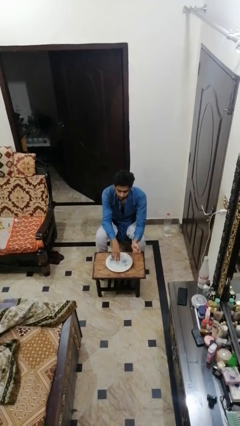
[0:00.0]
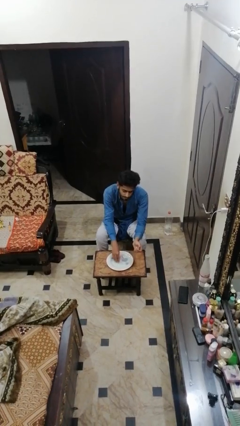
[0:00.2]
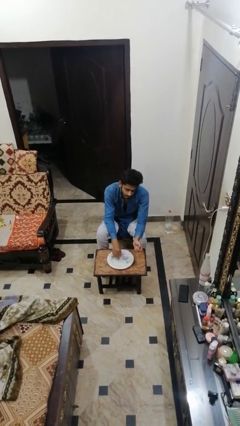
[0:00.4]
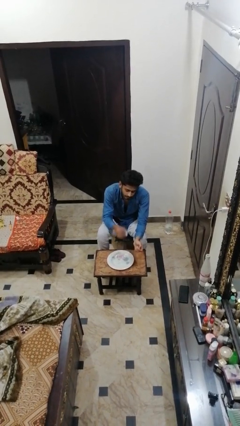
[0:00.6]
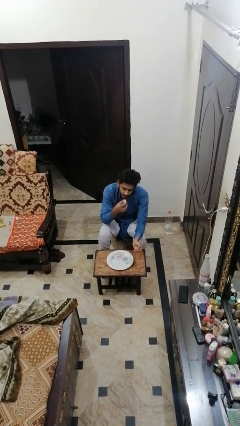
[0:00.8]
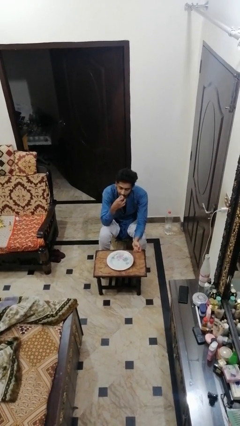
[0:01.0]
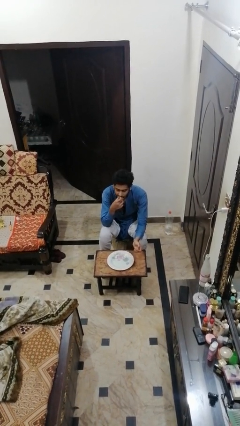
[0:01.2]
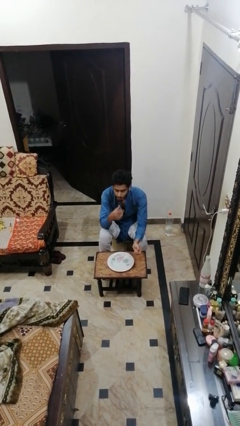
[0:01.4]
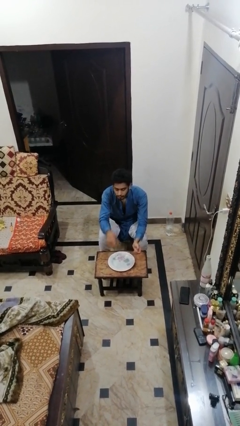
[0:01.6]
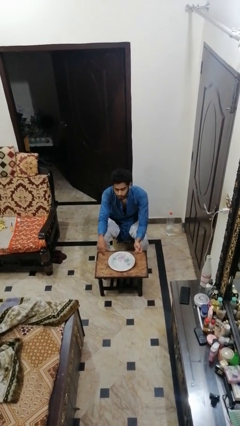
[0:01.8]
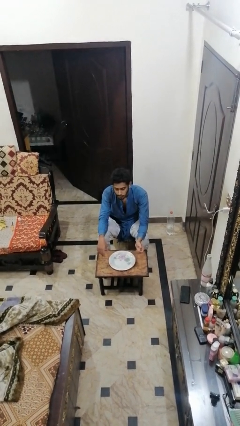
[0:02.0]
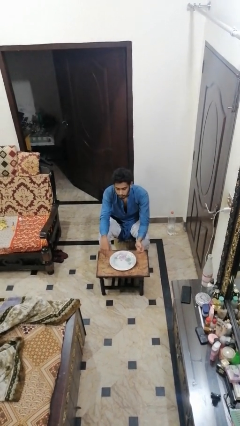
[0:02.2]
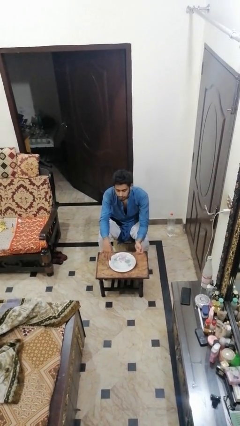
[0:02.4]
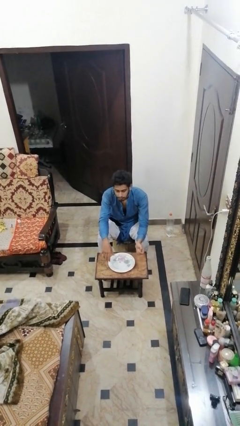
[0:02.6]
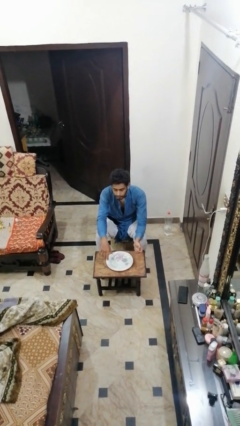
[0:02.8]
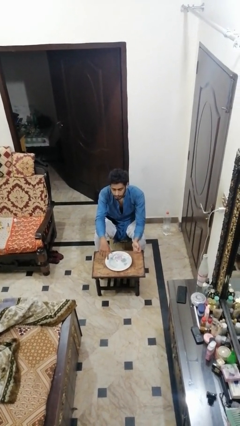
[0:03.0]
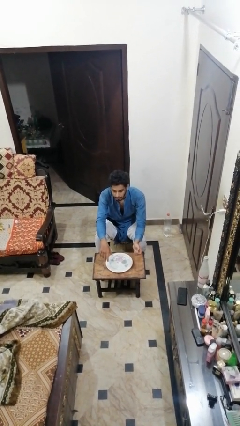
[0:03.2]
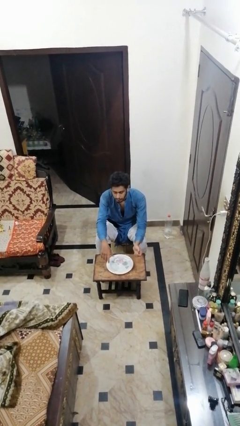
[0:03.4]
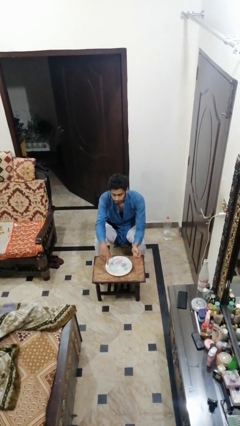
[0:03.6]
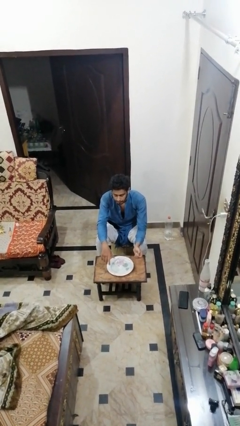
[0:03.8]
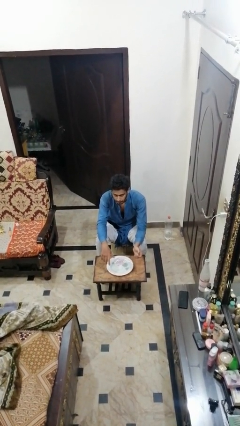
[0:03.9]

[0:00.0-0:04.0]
person eats with hands

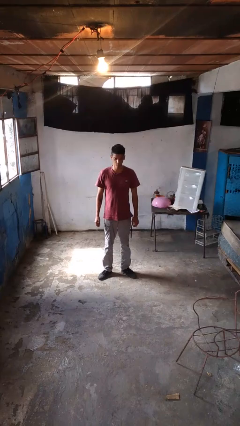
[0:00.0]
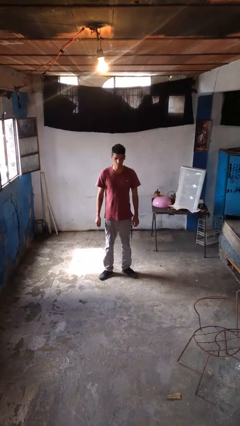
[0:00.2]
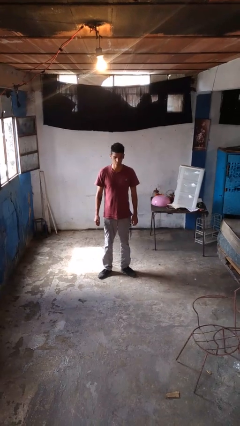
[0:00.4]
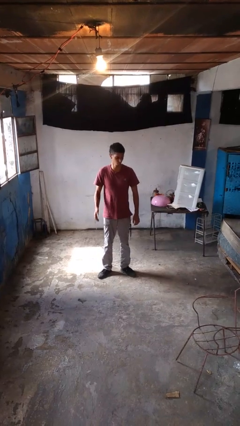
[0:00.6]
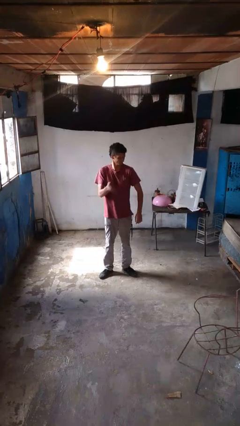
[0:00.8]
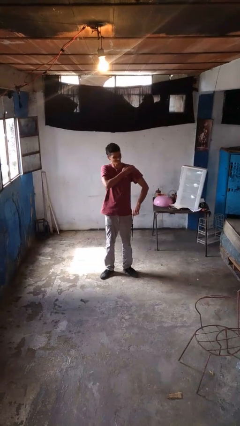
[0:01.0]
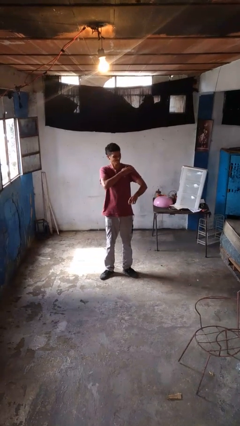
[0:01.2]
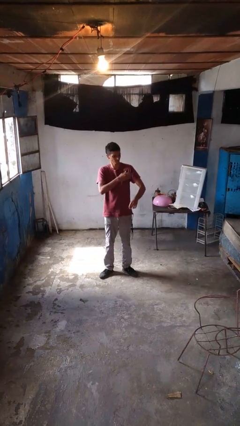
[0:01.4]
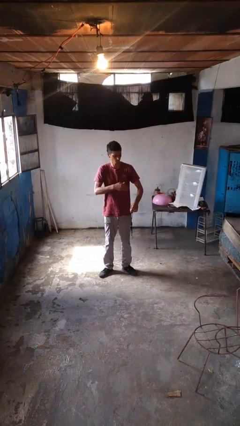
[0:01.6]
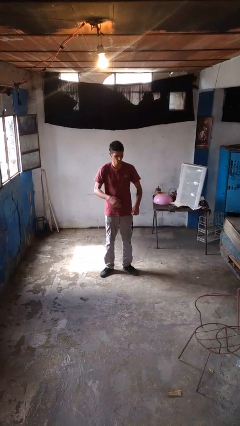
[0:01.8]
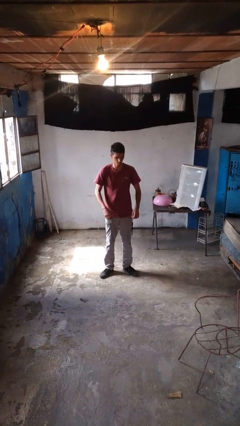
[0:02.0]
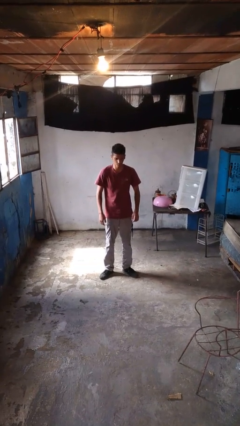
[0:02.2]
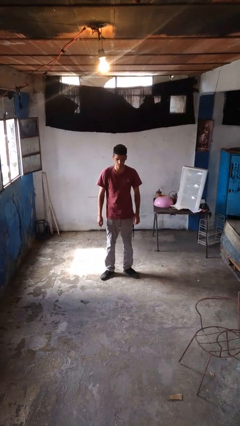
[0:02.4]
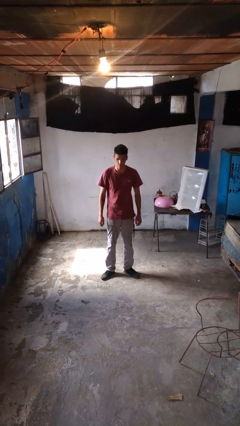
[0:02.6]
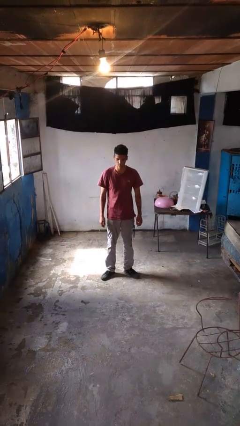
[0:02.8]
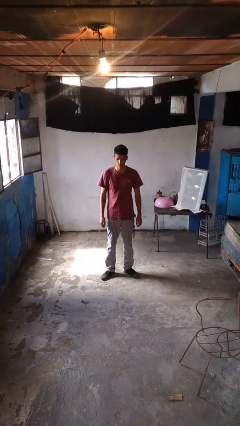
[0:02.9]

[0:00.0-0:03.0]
person swats bug

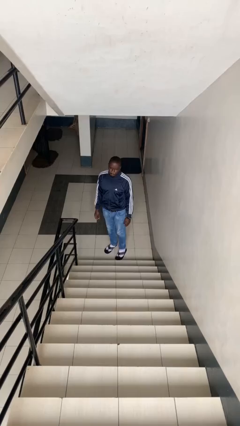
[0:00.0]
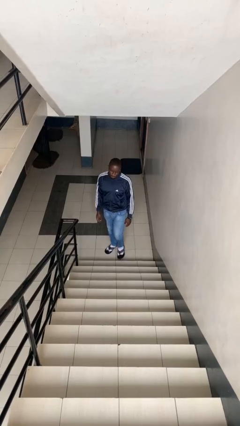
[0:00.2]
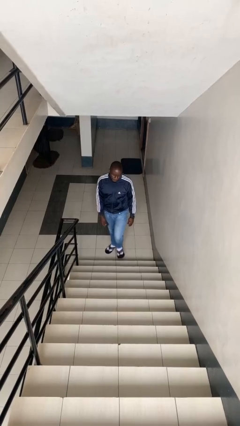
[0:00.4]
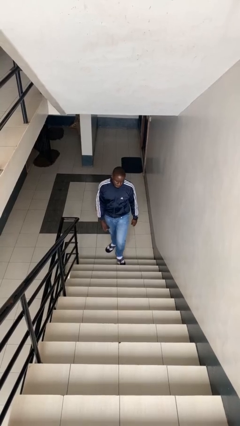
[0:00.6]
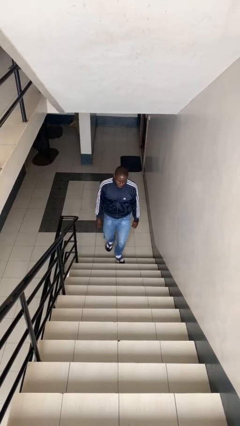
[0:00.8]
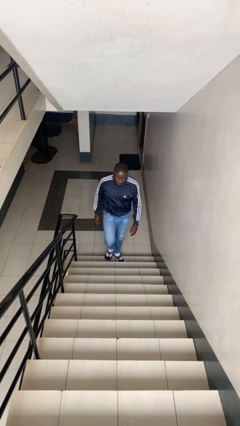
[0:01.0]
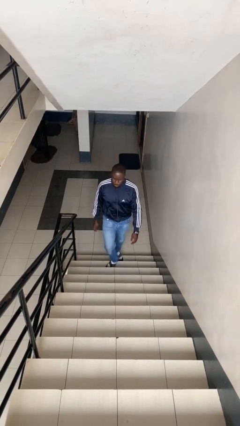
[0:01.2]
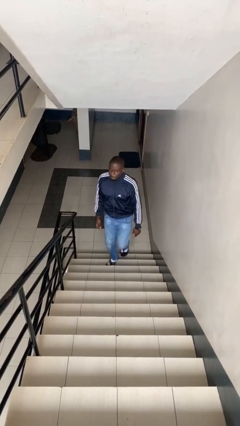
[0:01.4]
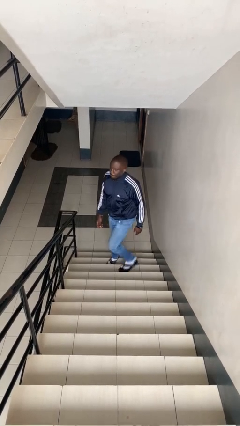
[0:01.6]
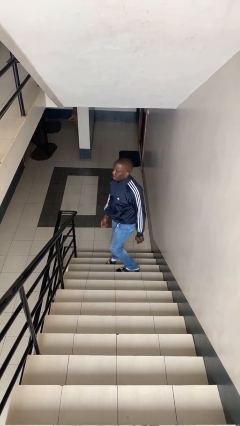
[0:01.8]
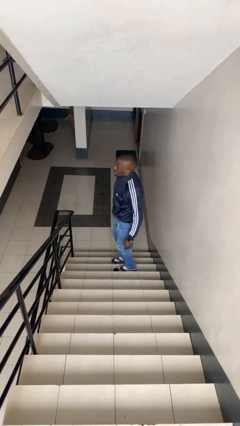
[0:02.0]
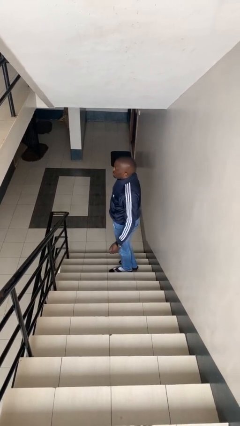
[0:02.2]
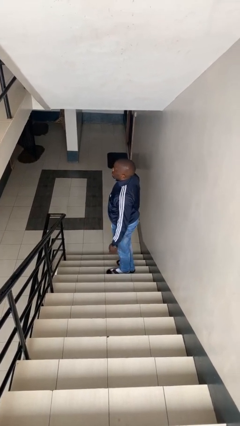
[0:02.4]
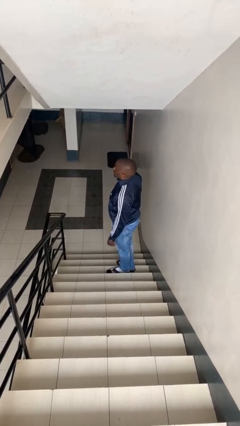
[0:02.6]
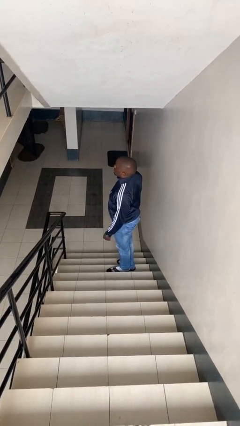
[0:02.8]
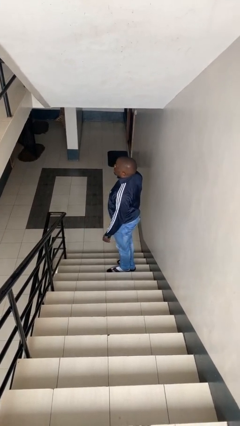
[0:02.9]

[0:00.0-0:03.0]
person climbs up stairs

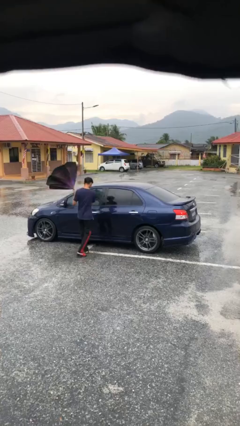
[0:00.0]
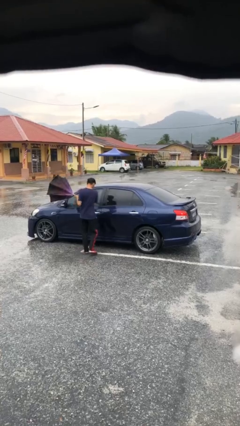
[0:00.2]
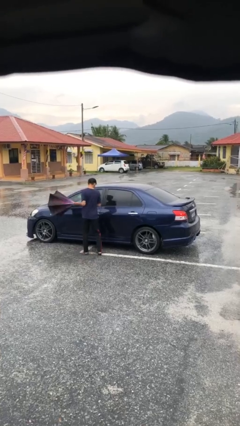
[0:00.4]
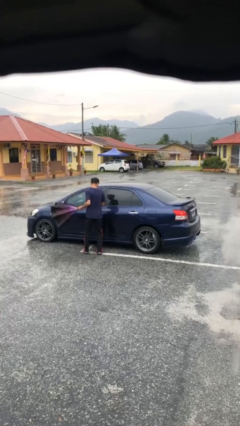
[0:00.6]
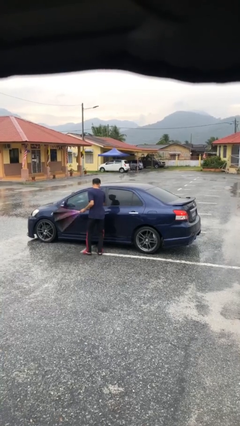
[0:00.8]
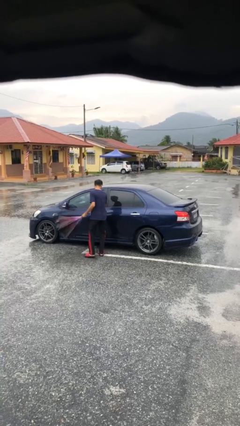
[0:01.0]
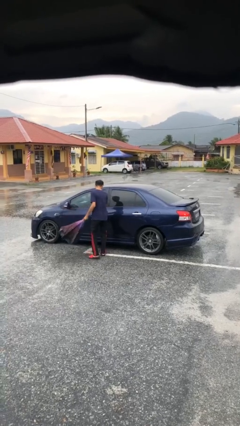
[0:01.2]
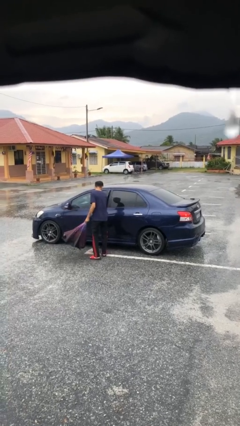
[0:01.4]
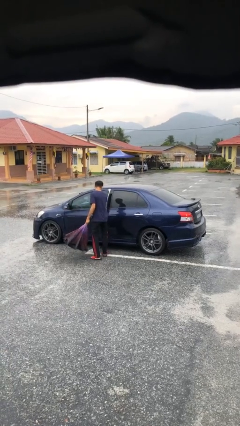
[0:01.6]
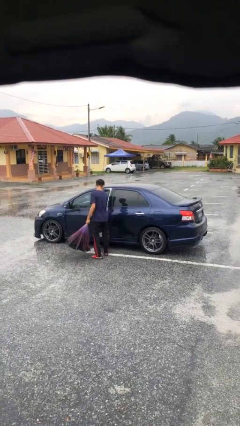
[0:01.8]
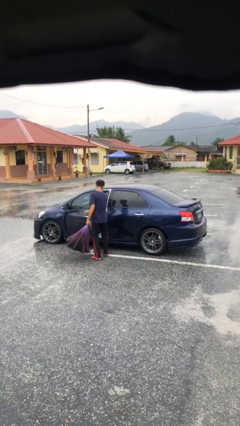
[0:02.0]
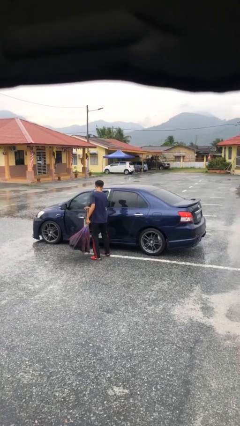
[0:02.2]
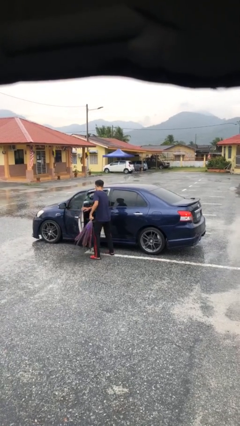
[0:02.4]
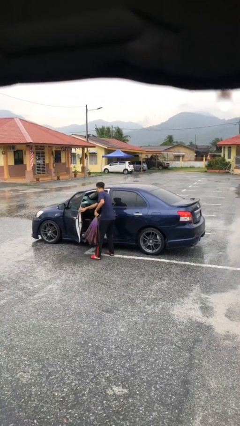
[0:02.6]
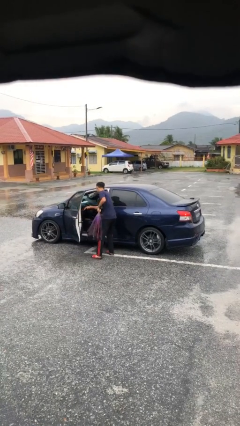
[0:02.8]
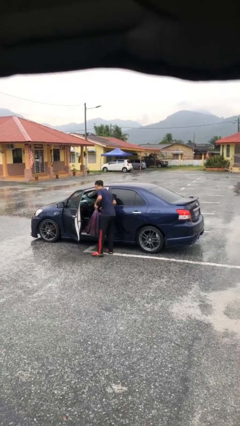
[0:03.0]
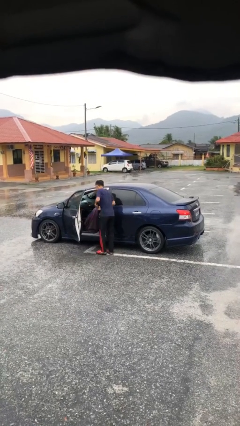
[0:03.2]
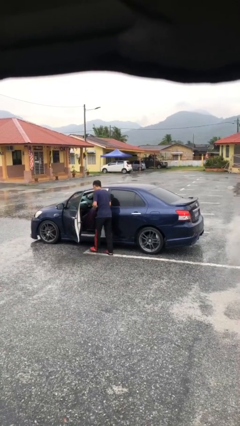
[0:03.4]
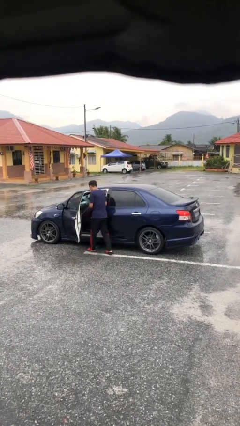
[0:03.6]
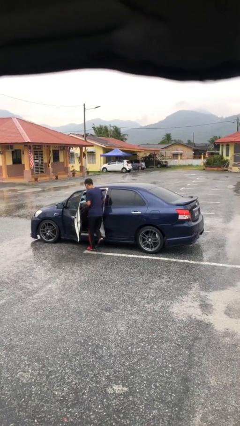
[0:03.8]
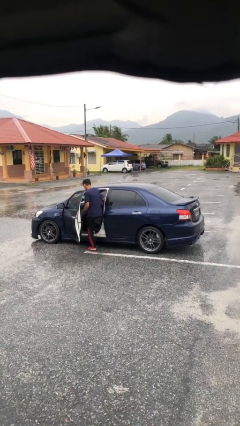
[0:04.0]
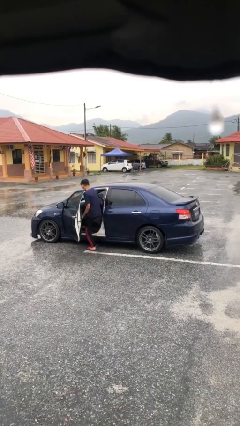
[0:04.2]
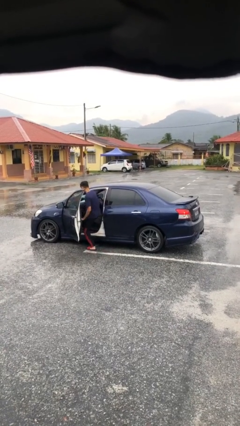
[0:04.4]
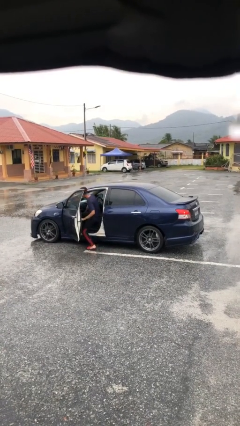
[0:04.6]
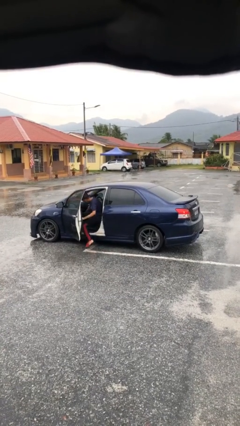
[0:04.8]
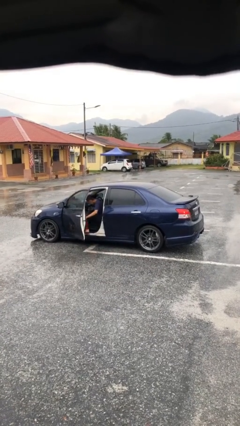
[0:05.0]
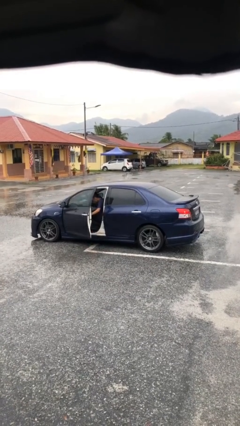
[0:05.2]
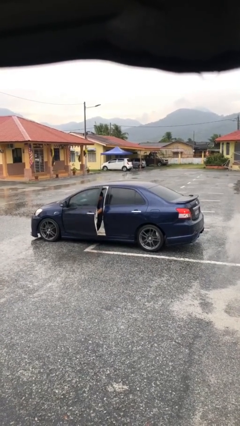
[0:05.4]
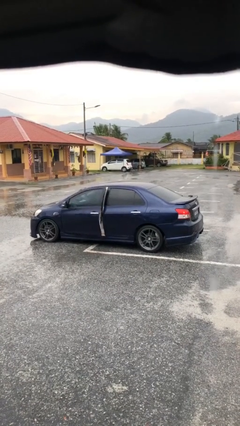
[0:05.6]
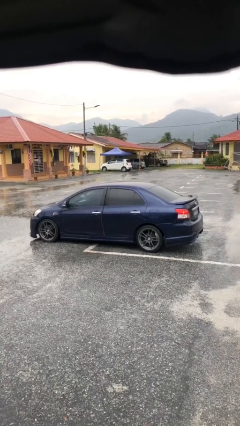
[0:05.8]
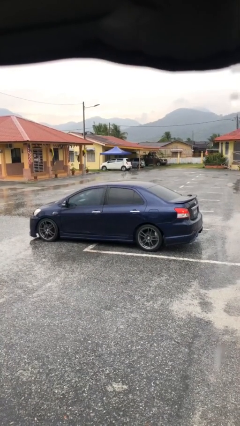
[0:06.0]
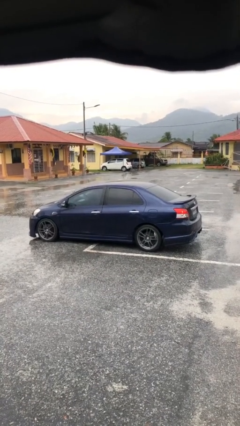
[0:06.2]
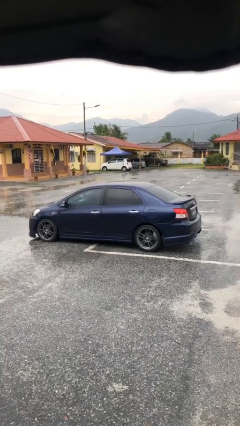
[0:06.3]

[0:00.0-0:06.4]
car picks up person

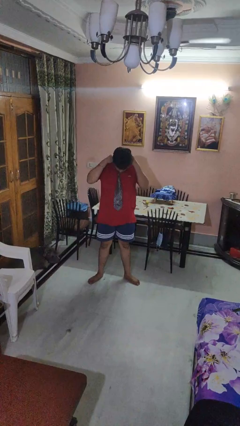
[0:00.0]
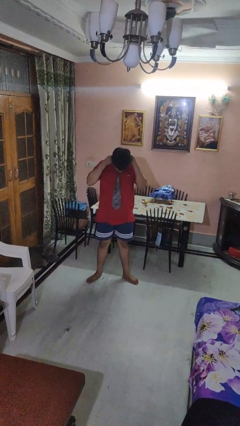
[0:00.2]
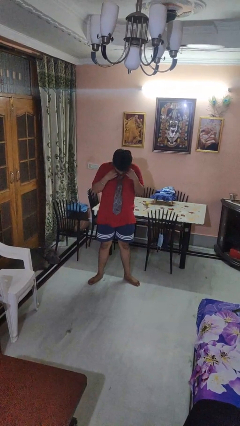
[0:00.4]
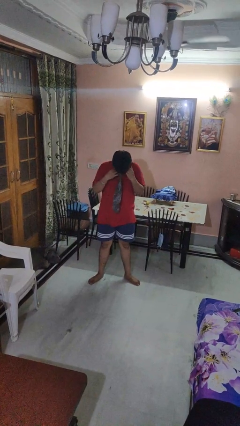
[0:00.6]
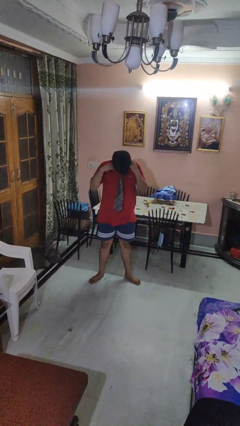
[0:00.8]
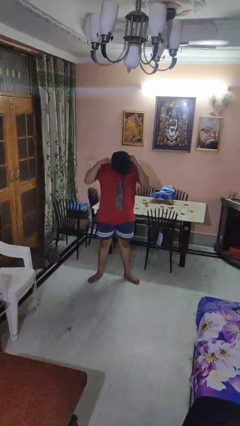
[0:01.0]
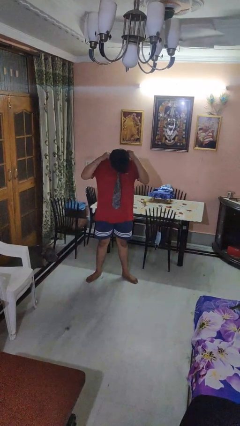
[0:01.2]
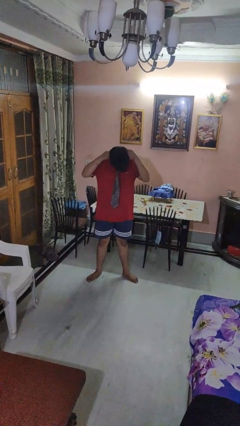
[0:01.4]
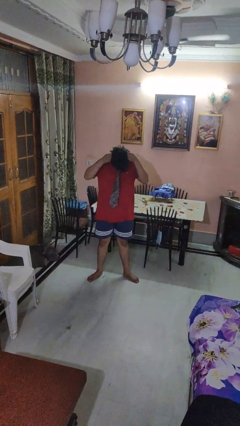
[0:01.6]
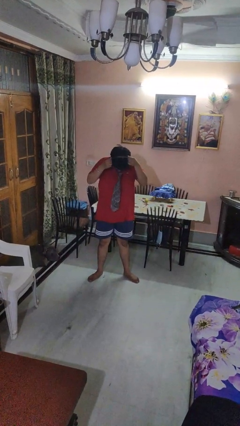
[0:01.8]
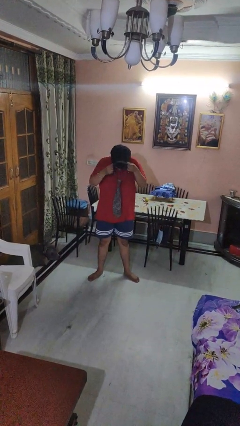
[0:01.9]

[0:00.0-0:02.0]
person takes off necktie
